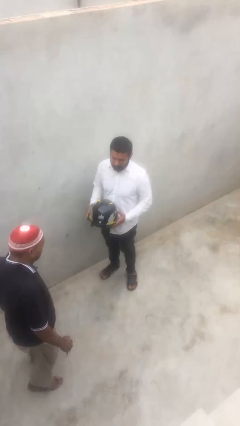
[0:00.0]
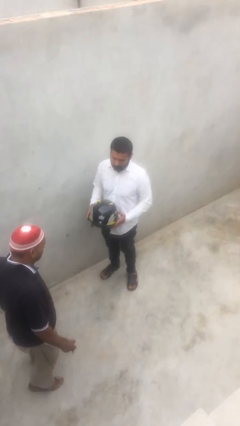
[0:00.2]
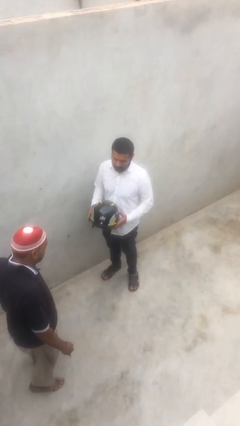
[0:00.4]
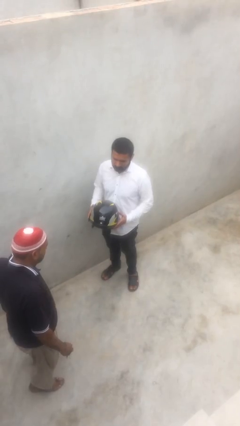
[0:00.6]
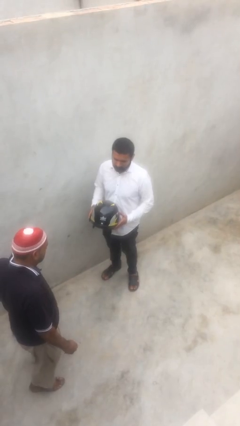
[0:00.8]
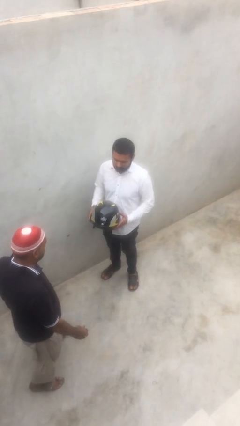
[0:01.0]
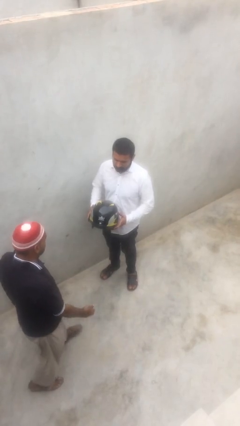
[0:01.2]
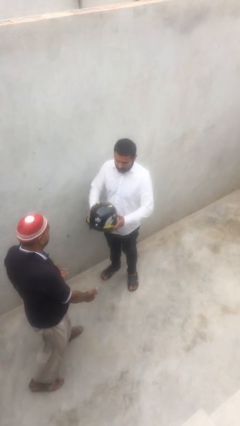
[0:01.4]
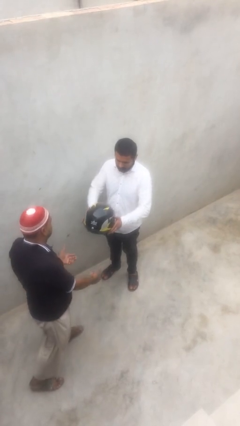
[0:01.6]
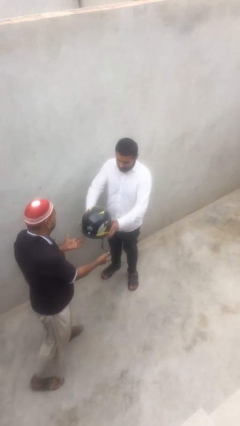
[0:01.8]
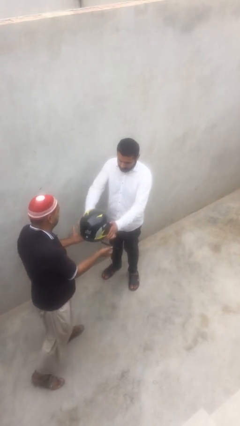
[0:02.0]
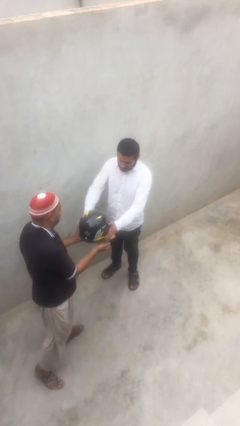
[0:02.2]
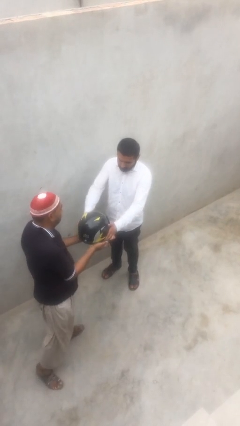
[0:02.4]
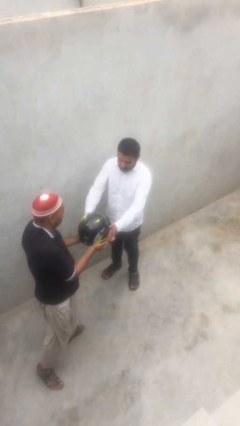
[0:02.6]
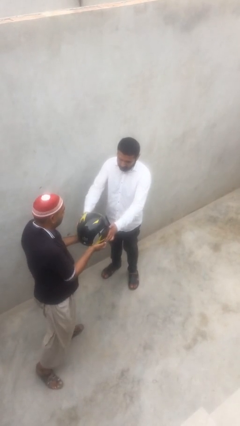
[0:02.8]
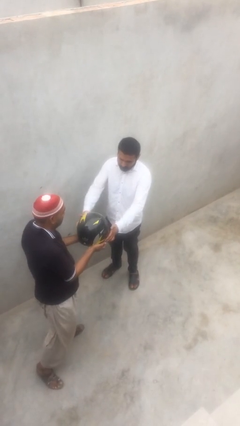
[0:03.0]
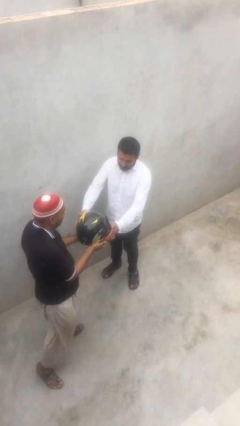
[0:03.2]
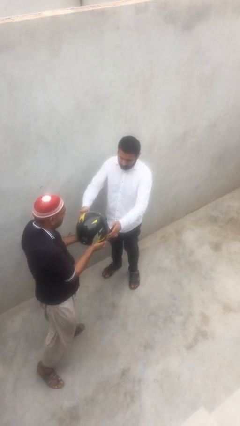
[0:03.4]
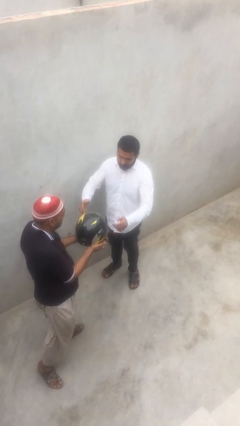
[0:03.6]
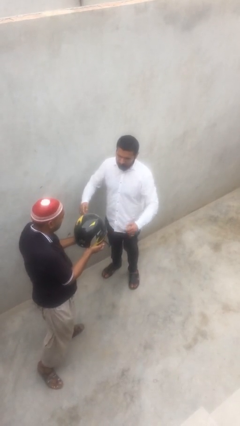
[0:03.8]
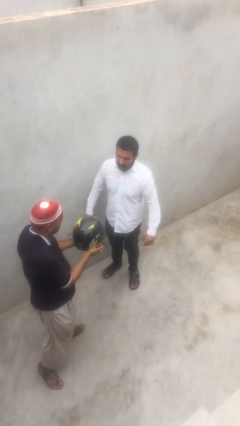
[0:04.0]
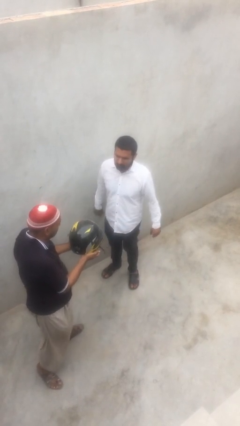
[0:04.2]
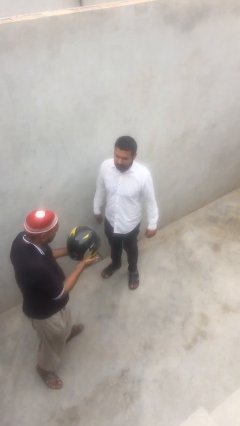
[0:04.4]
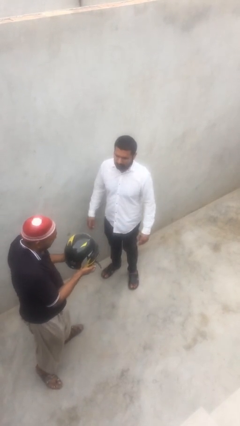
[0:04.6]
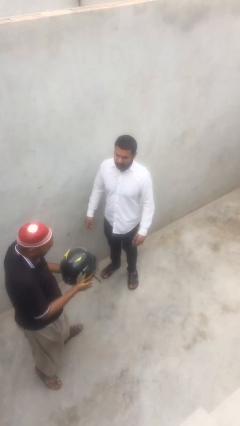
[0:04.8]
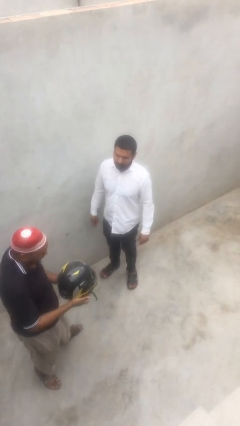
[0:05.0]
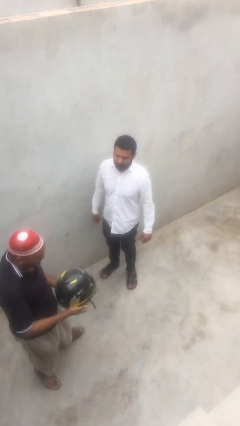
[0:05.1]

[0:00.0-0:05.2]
person transfers object to person

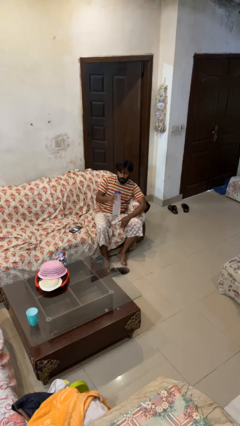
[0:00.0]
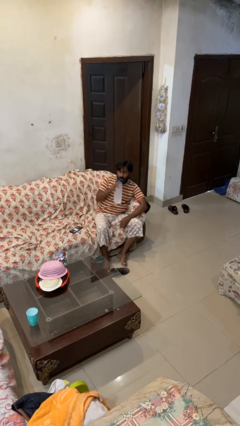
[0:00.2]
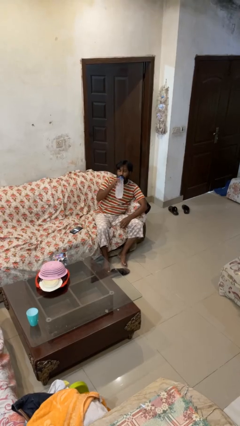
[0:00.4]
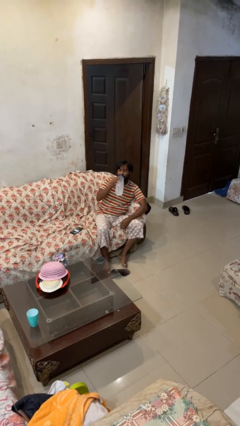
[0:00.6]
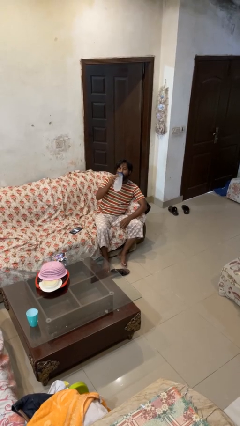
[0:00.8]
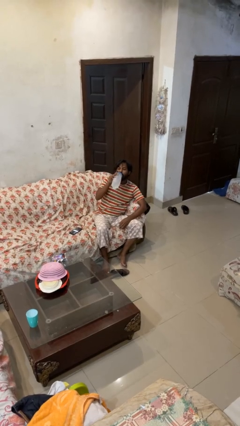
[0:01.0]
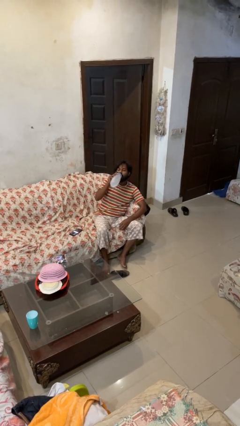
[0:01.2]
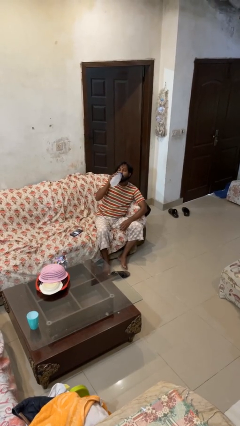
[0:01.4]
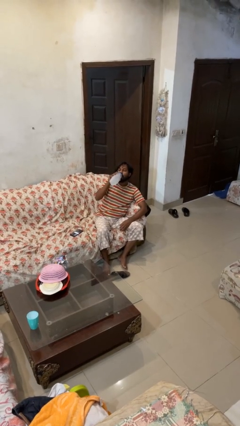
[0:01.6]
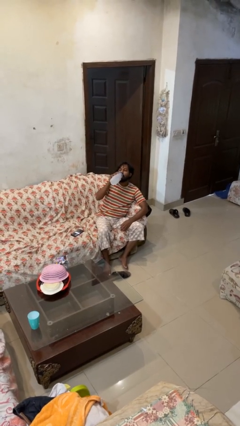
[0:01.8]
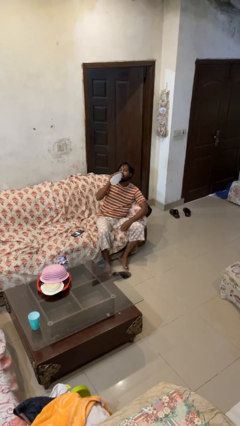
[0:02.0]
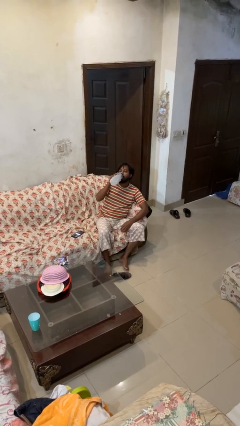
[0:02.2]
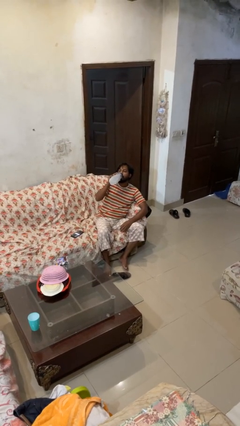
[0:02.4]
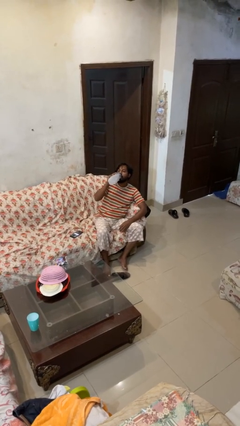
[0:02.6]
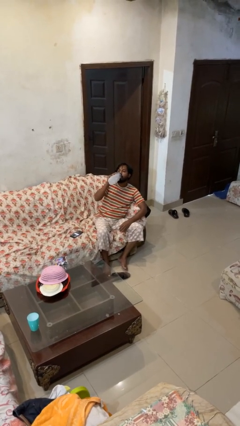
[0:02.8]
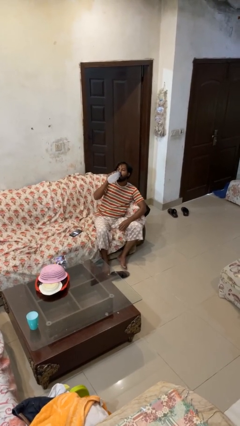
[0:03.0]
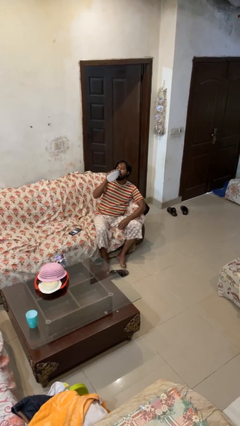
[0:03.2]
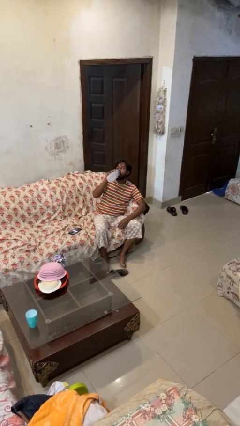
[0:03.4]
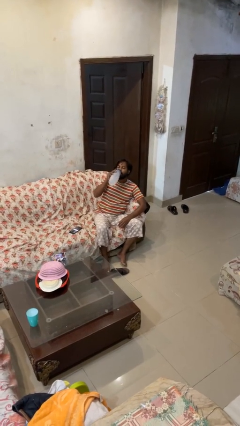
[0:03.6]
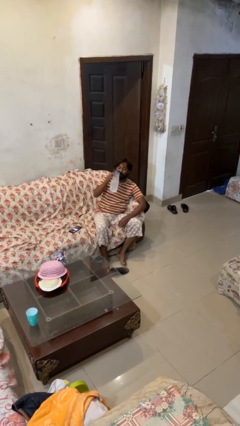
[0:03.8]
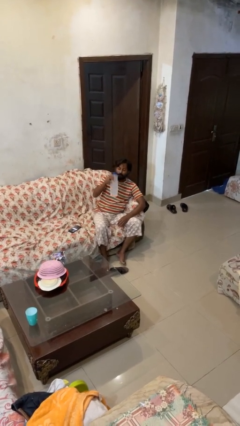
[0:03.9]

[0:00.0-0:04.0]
person drinks from bottle

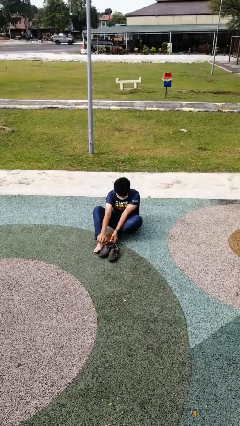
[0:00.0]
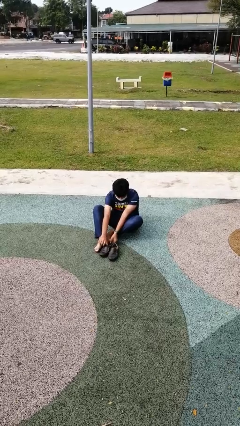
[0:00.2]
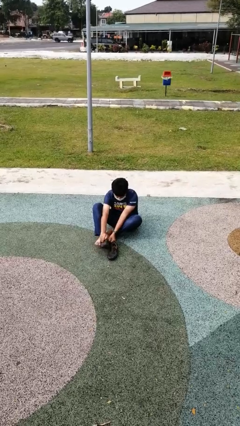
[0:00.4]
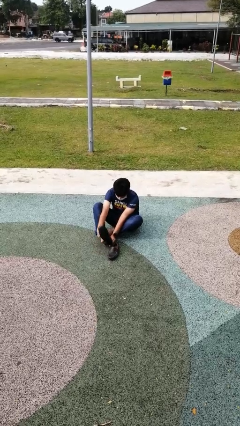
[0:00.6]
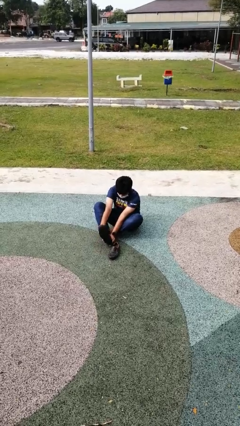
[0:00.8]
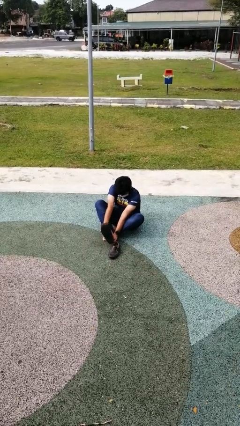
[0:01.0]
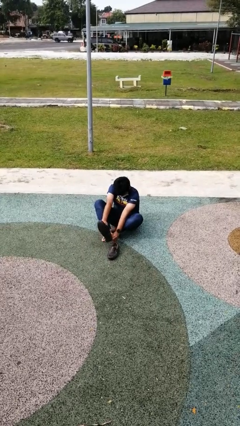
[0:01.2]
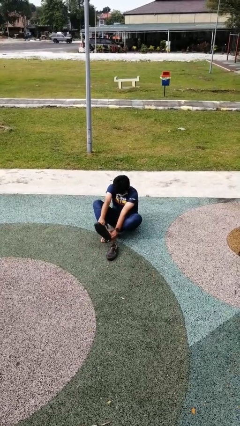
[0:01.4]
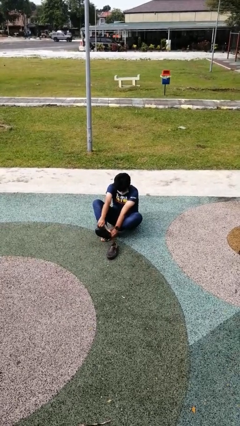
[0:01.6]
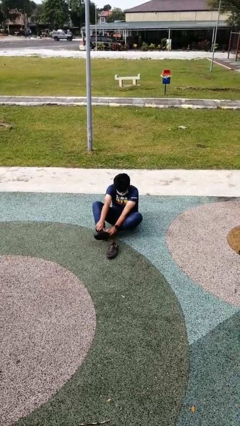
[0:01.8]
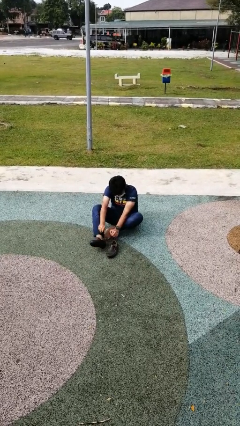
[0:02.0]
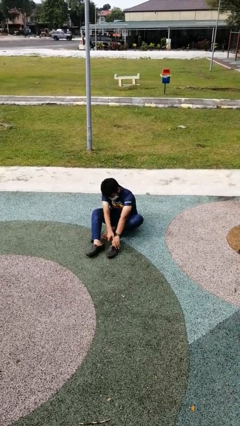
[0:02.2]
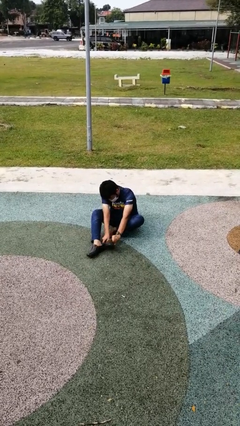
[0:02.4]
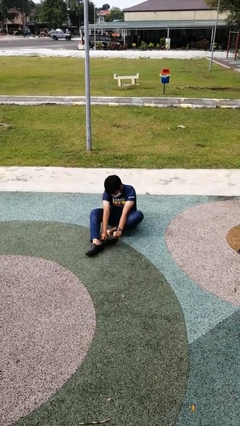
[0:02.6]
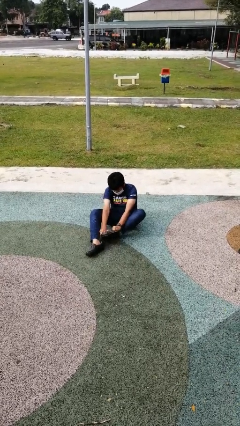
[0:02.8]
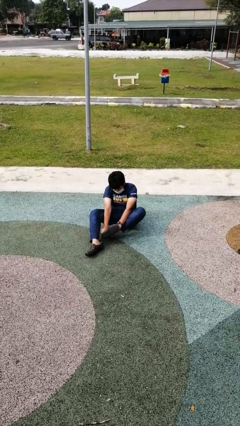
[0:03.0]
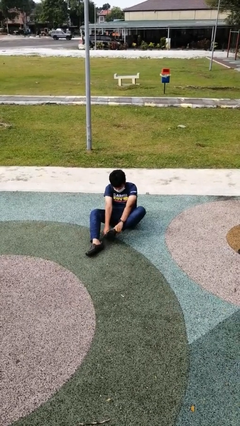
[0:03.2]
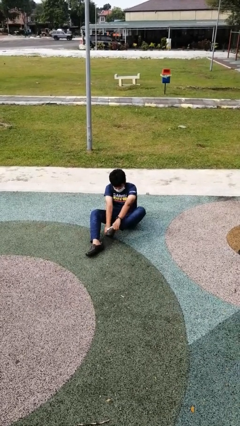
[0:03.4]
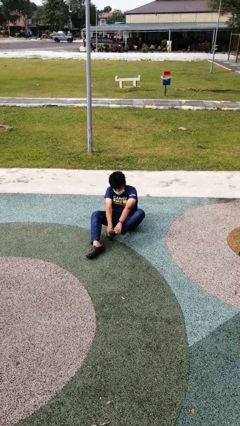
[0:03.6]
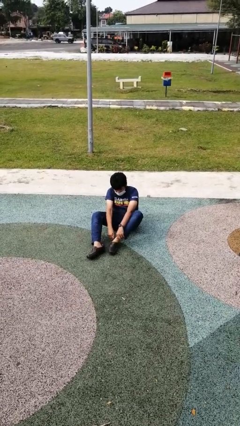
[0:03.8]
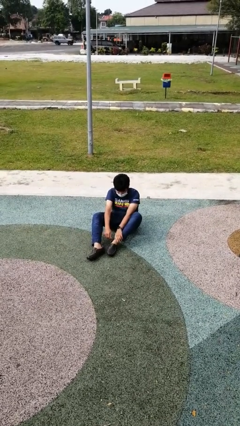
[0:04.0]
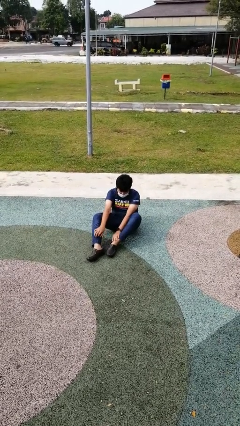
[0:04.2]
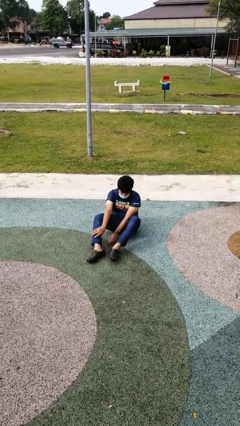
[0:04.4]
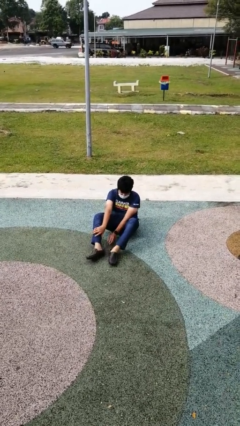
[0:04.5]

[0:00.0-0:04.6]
person puts on shoes

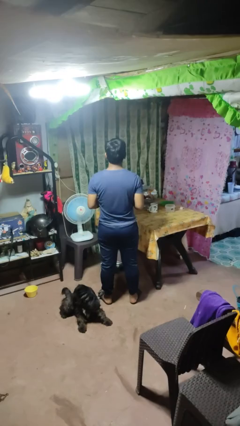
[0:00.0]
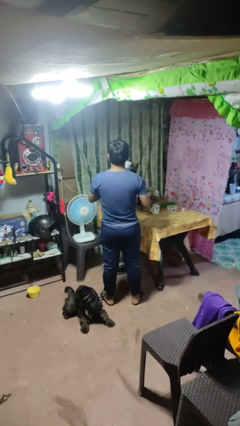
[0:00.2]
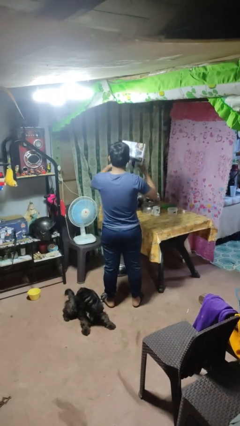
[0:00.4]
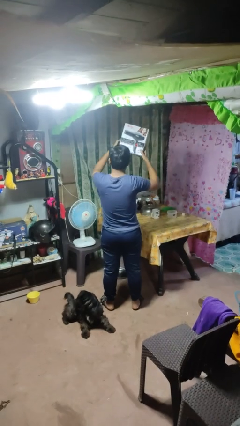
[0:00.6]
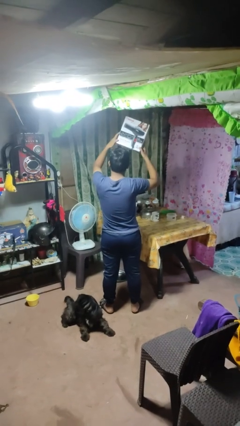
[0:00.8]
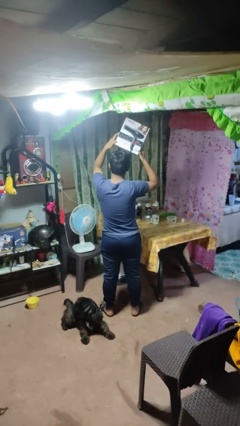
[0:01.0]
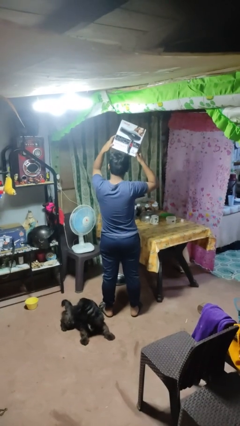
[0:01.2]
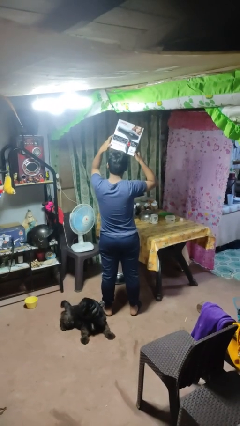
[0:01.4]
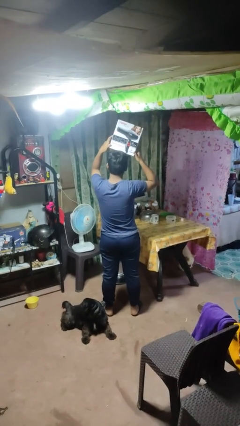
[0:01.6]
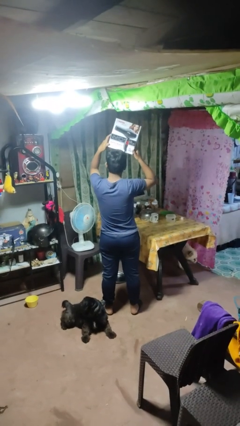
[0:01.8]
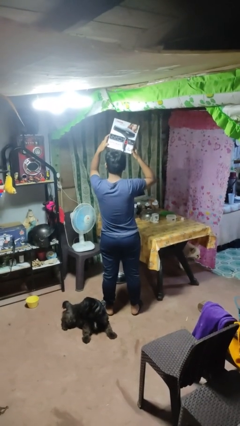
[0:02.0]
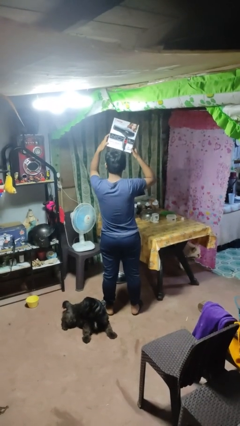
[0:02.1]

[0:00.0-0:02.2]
person holds object above head

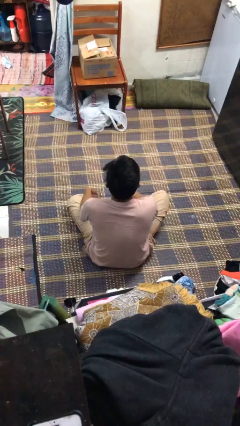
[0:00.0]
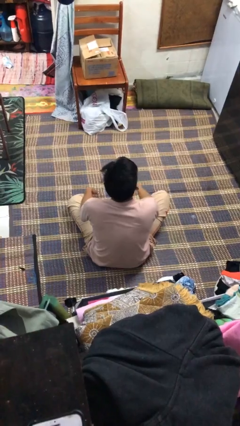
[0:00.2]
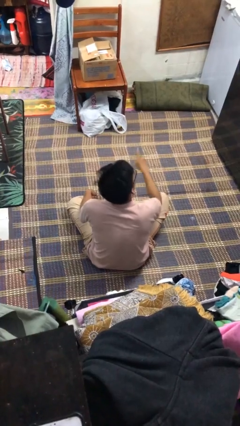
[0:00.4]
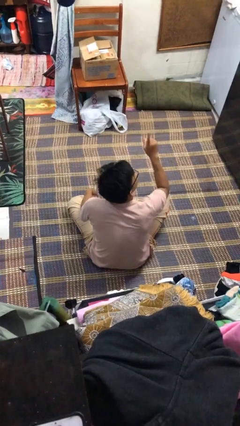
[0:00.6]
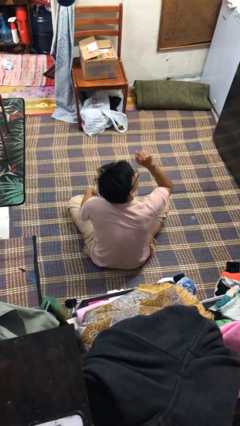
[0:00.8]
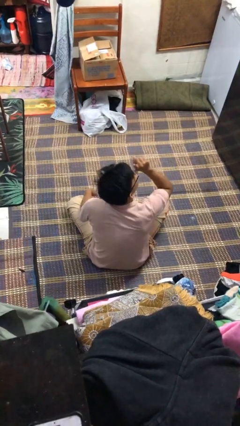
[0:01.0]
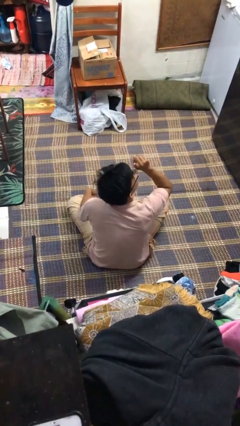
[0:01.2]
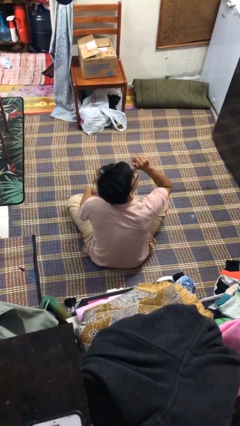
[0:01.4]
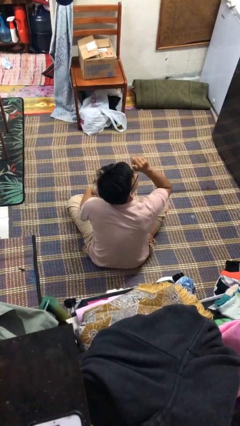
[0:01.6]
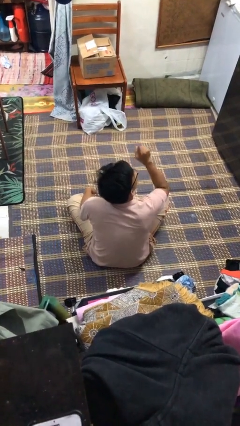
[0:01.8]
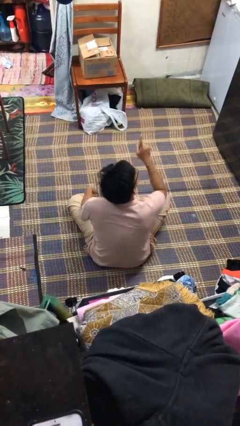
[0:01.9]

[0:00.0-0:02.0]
person gestures be quiet
